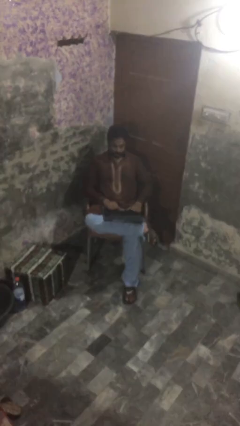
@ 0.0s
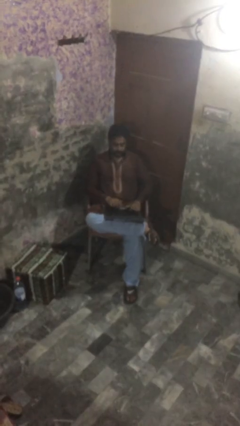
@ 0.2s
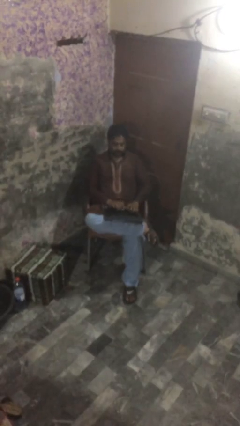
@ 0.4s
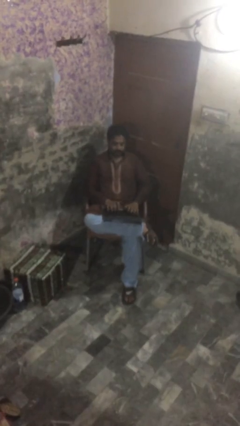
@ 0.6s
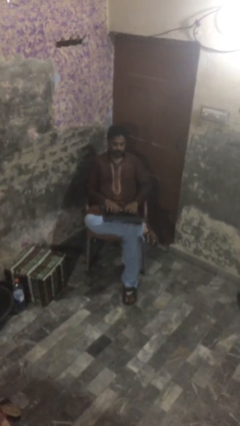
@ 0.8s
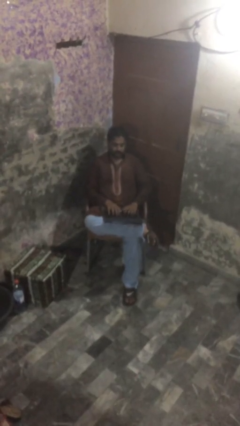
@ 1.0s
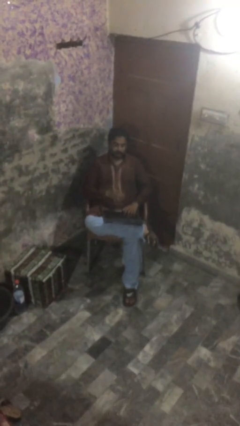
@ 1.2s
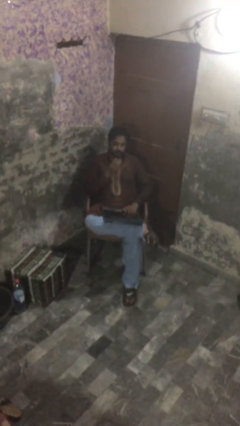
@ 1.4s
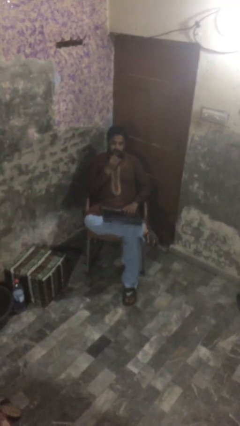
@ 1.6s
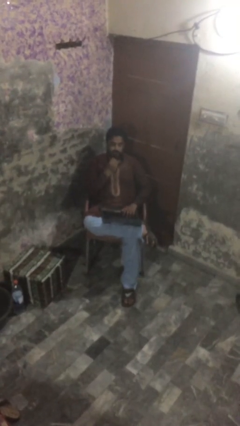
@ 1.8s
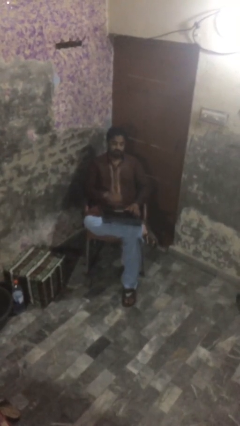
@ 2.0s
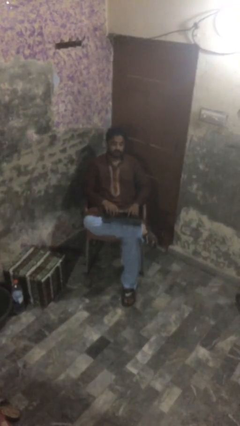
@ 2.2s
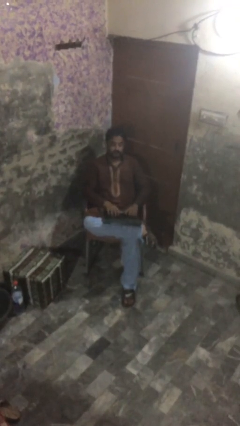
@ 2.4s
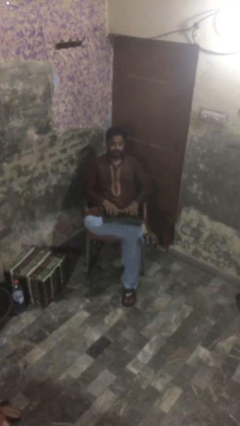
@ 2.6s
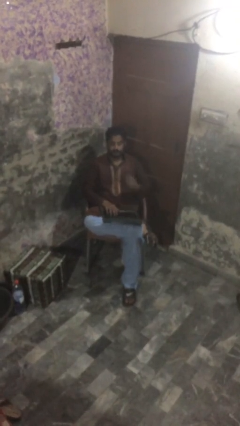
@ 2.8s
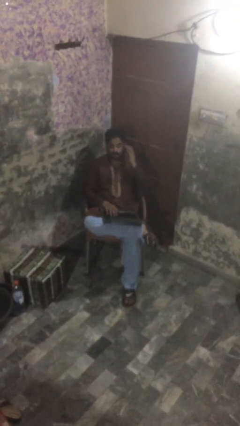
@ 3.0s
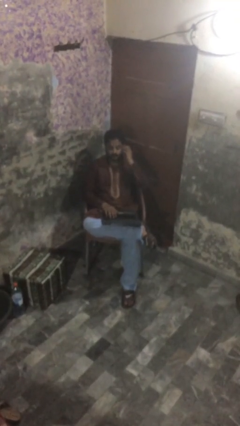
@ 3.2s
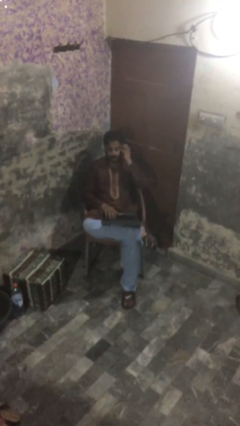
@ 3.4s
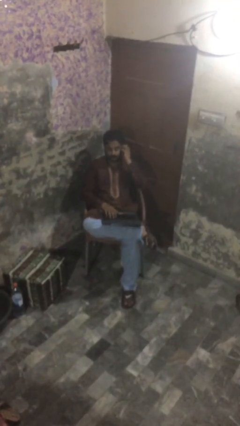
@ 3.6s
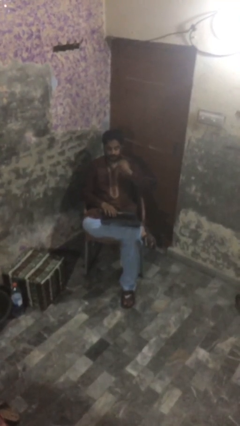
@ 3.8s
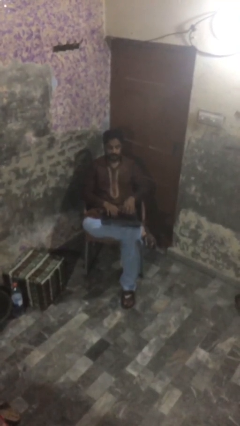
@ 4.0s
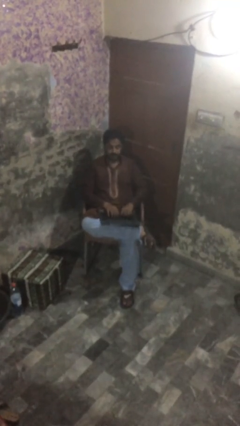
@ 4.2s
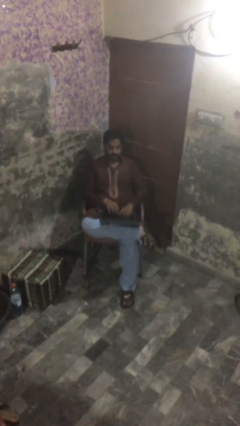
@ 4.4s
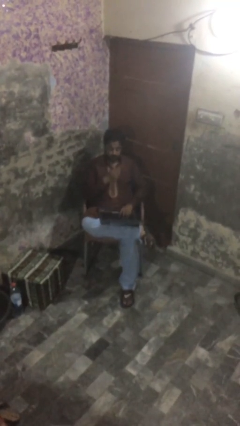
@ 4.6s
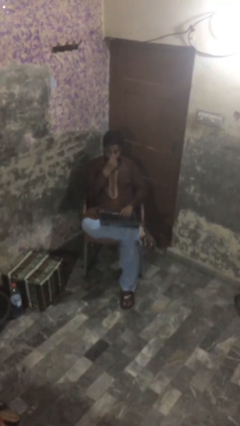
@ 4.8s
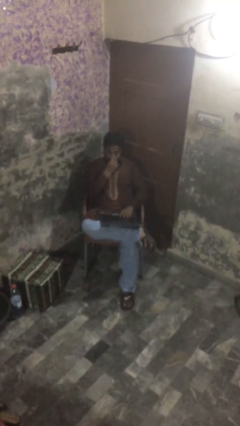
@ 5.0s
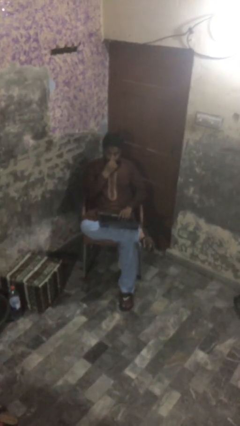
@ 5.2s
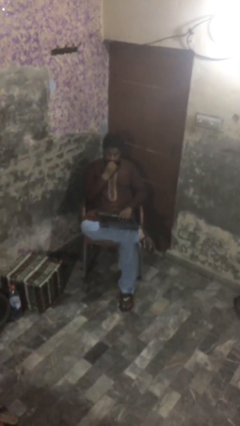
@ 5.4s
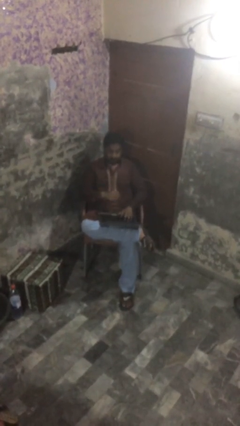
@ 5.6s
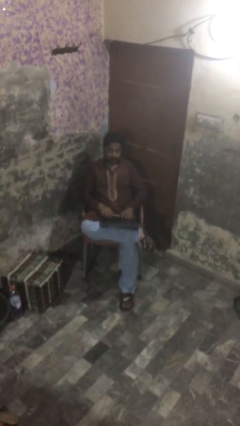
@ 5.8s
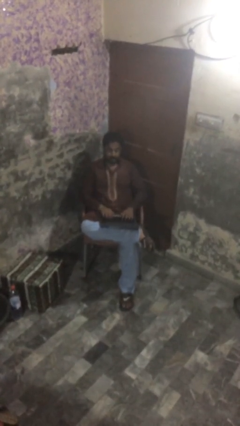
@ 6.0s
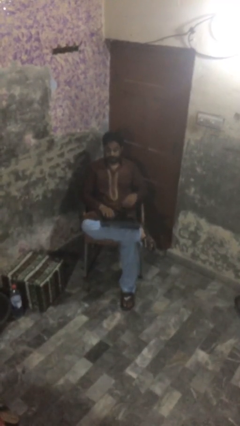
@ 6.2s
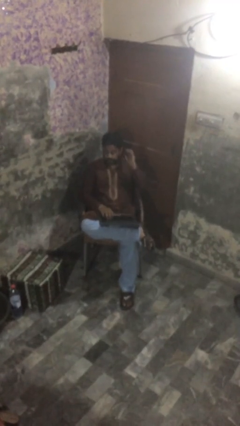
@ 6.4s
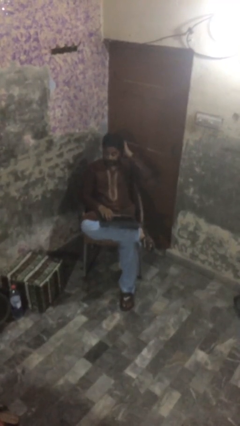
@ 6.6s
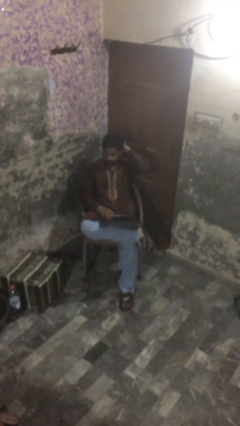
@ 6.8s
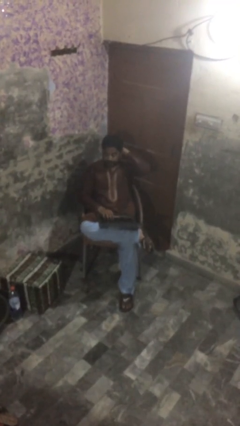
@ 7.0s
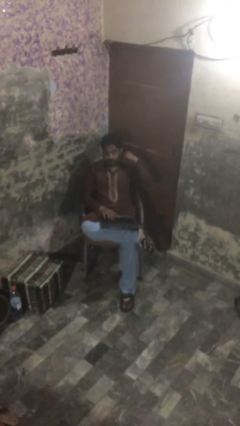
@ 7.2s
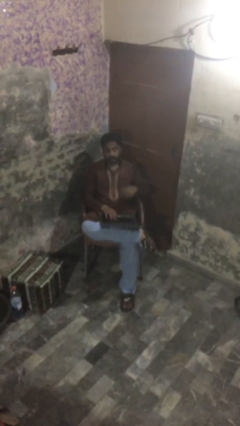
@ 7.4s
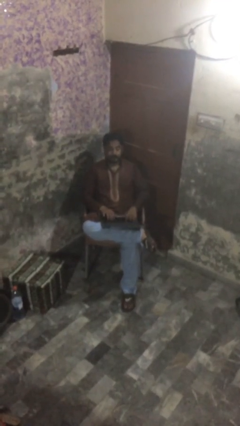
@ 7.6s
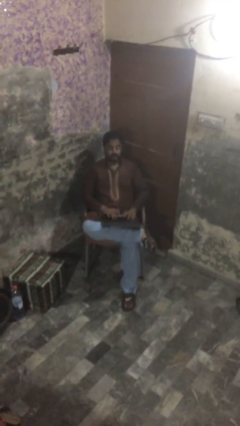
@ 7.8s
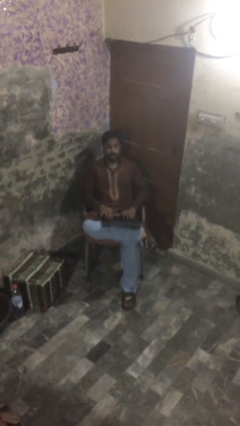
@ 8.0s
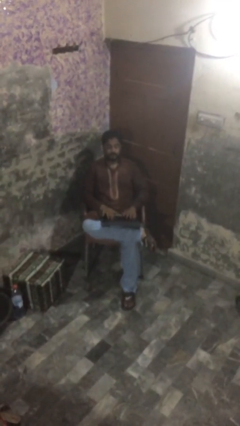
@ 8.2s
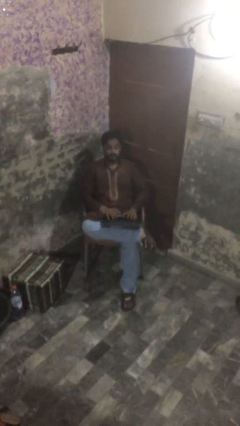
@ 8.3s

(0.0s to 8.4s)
person interacts with laptop

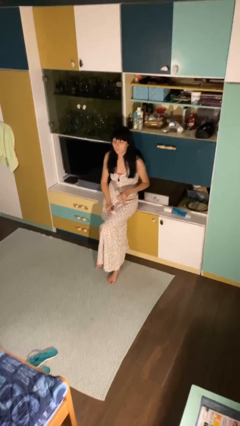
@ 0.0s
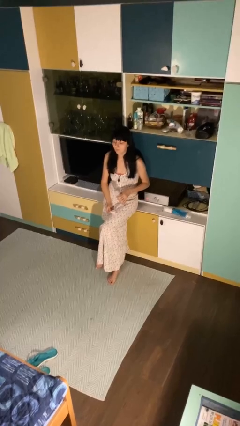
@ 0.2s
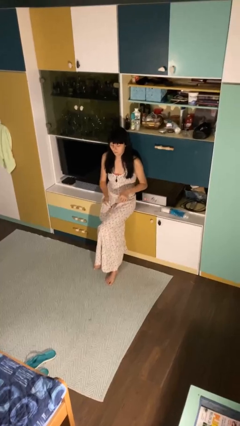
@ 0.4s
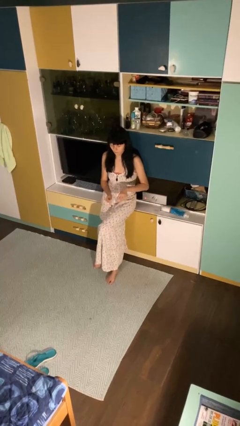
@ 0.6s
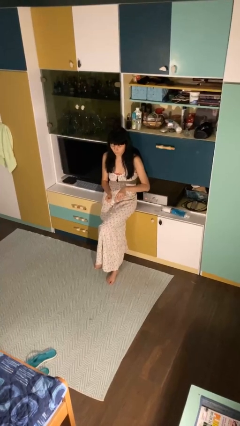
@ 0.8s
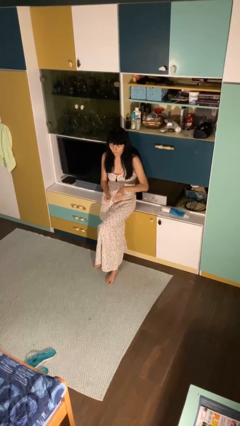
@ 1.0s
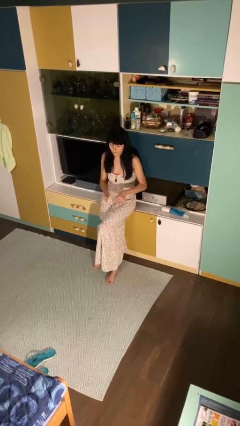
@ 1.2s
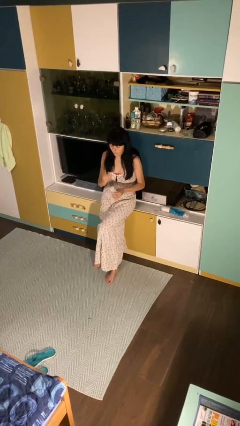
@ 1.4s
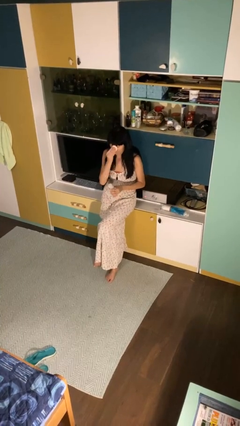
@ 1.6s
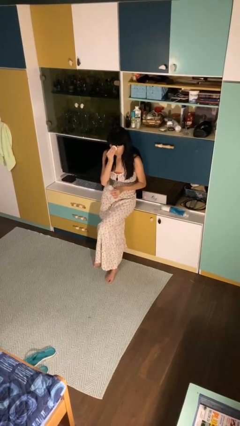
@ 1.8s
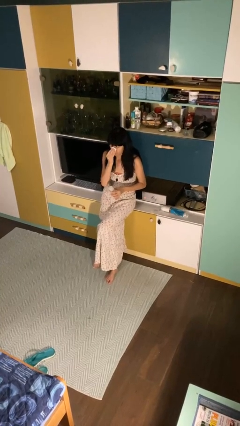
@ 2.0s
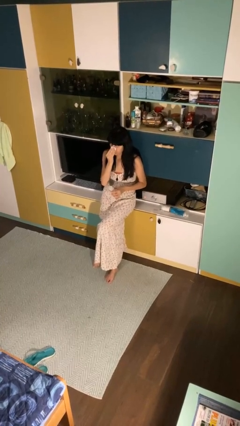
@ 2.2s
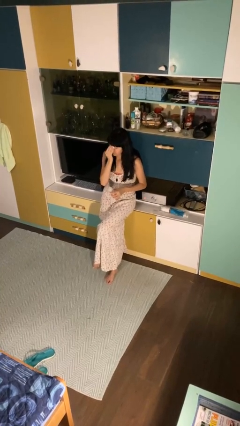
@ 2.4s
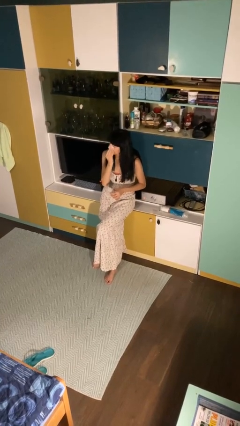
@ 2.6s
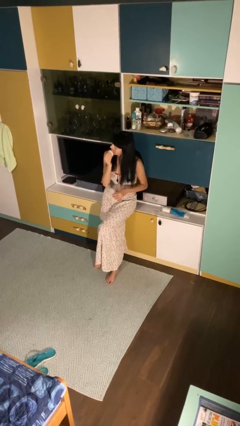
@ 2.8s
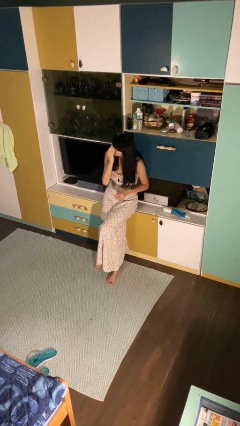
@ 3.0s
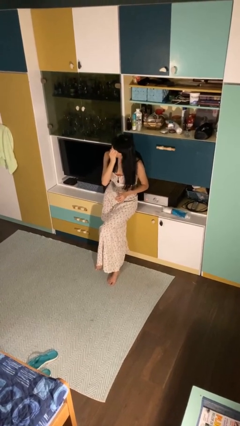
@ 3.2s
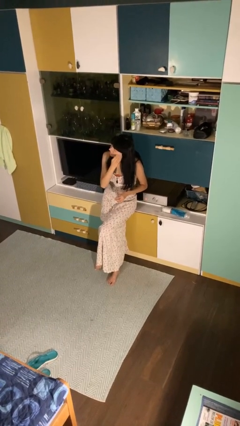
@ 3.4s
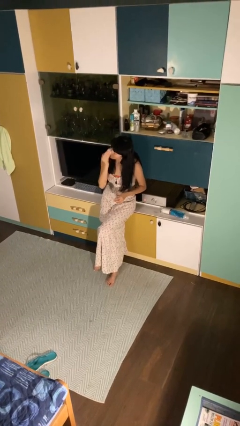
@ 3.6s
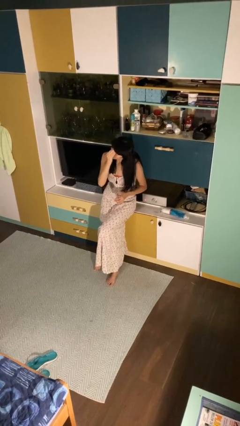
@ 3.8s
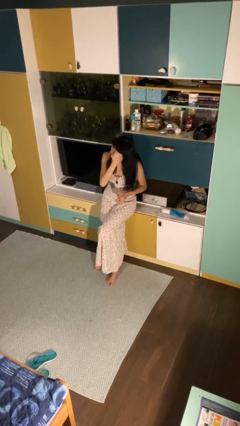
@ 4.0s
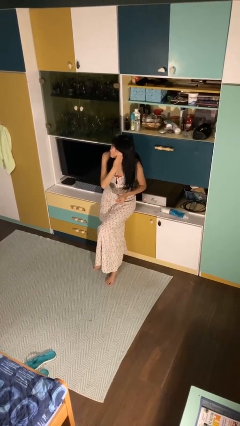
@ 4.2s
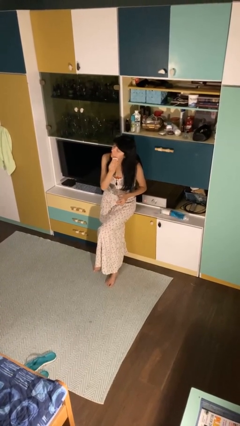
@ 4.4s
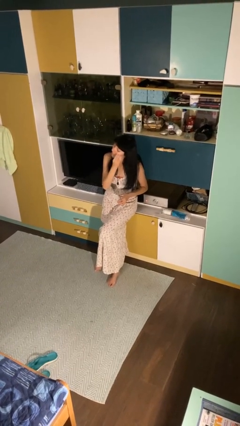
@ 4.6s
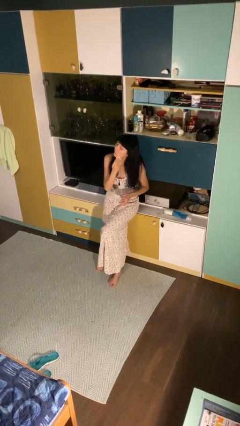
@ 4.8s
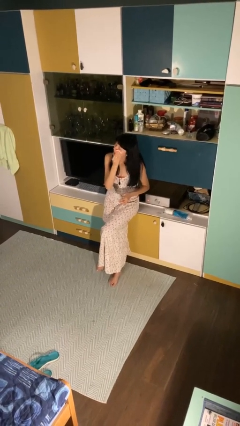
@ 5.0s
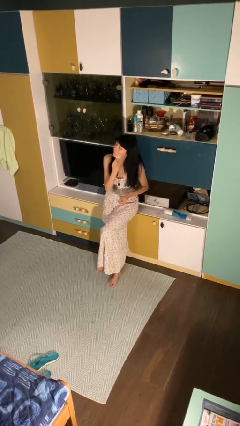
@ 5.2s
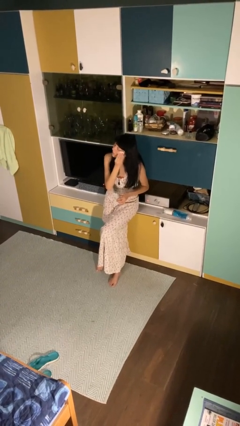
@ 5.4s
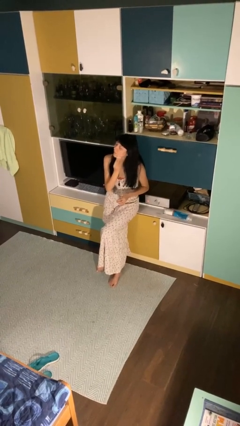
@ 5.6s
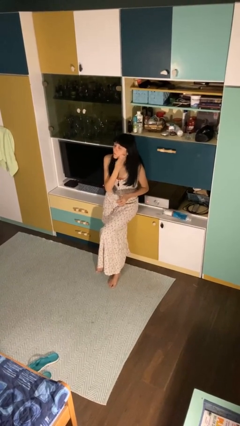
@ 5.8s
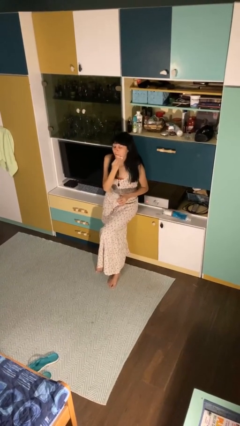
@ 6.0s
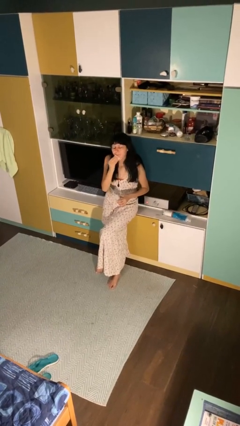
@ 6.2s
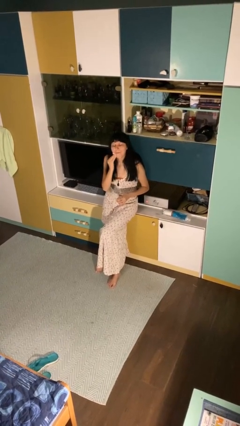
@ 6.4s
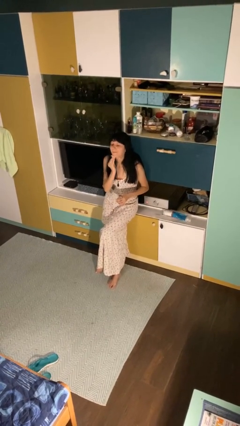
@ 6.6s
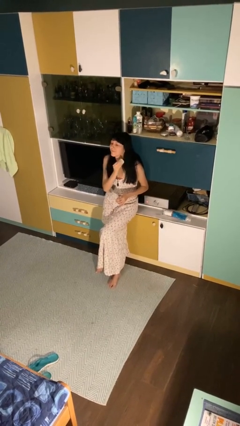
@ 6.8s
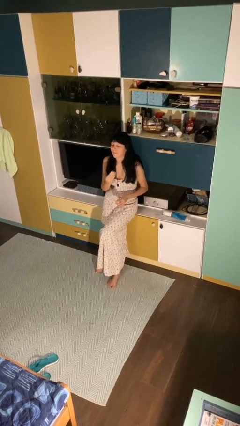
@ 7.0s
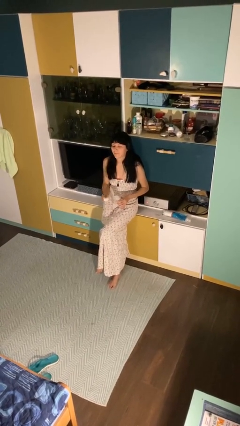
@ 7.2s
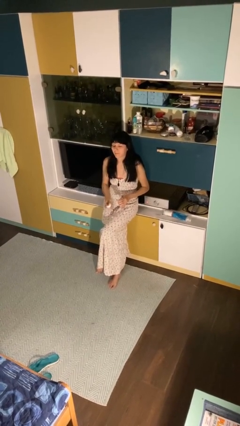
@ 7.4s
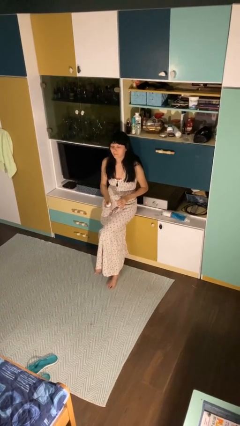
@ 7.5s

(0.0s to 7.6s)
person applies facial moisturizer

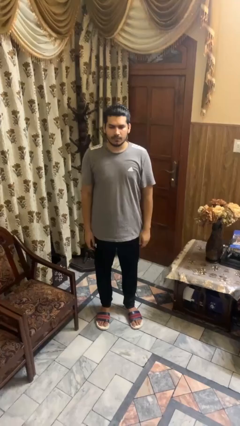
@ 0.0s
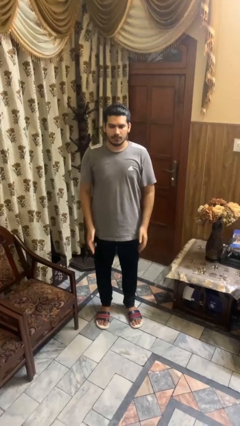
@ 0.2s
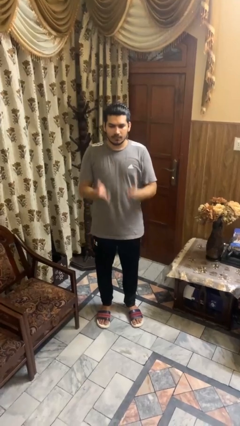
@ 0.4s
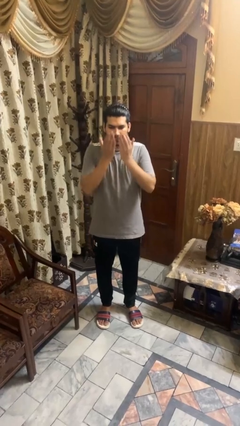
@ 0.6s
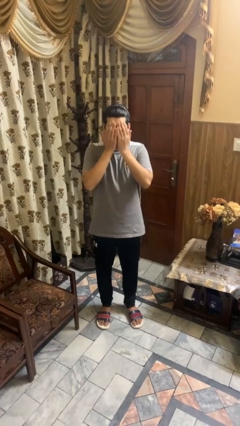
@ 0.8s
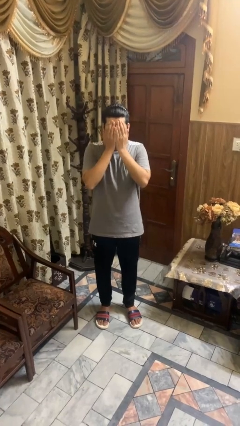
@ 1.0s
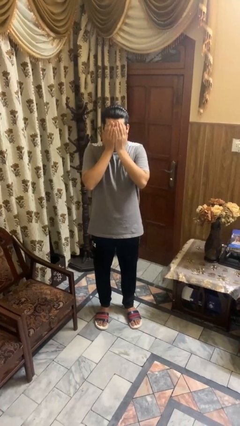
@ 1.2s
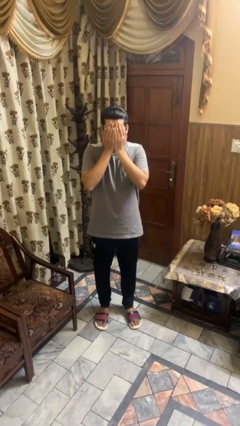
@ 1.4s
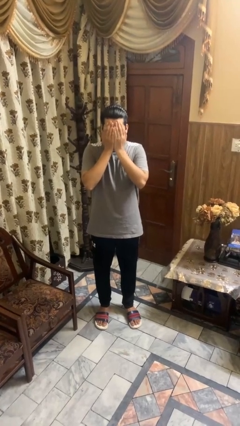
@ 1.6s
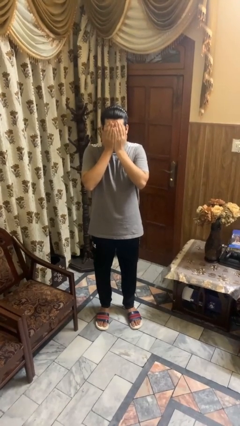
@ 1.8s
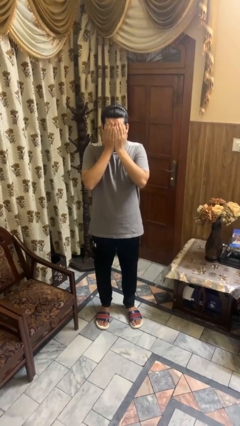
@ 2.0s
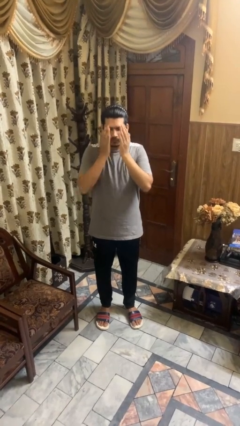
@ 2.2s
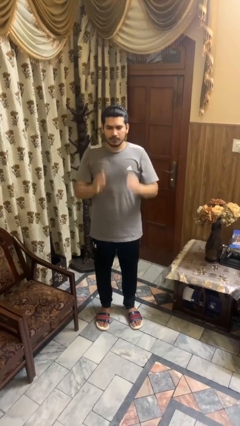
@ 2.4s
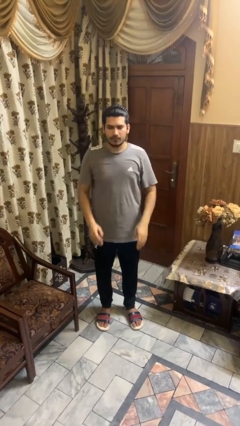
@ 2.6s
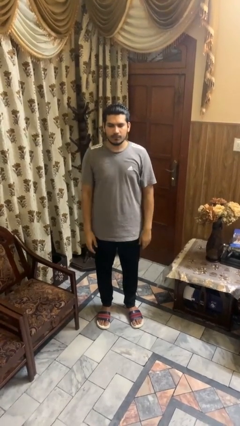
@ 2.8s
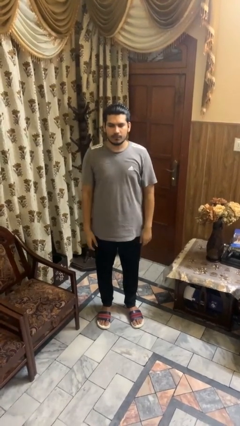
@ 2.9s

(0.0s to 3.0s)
person covers face with hands
